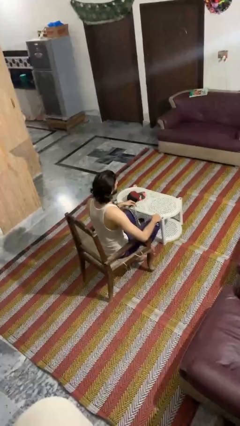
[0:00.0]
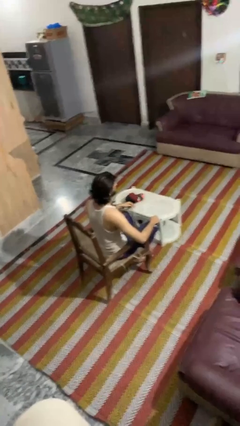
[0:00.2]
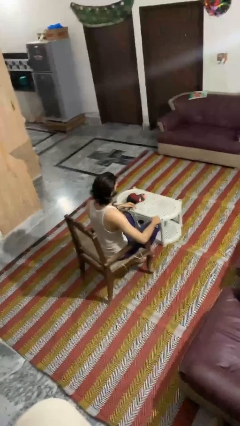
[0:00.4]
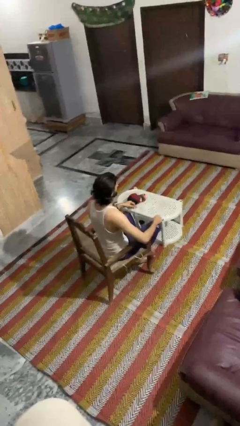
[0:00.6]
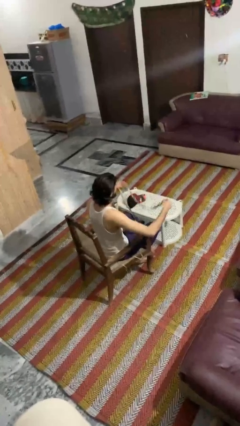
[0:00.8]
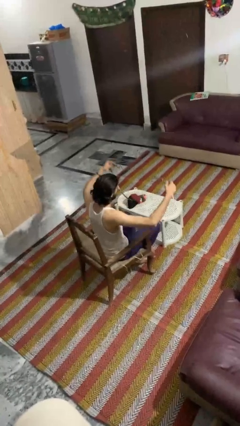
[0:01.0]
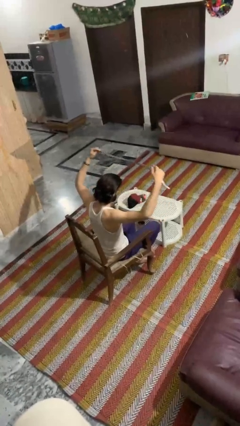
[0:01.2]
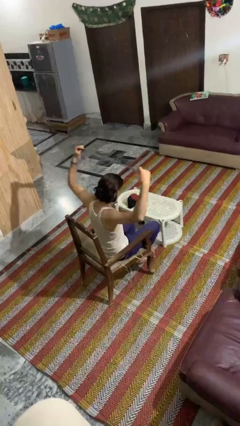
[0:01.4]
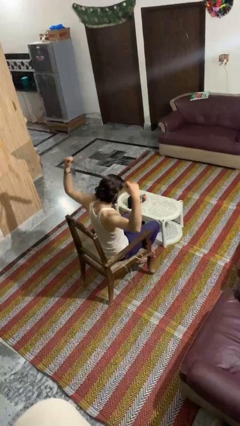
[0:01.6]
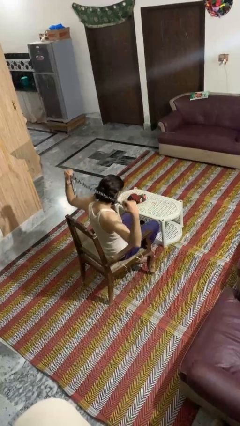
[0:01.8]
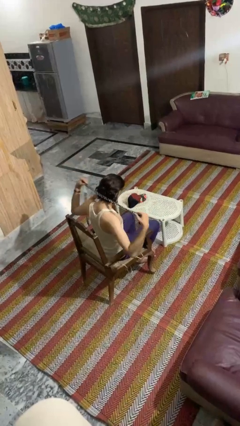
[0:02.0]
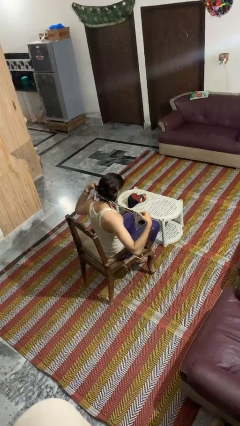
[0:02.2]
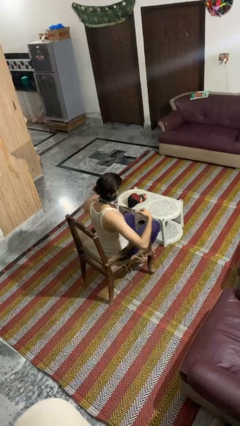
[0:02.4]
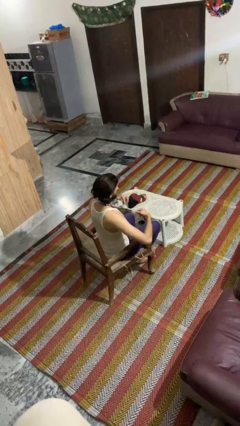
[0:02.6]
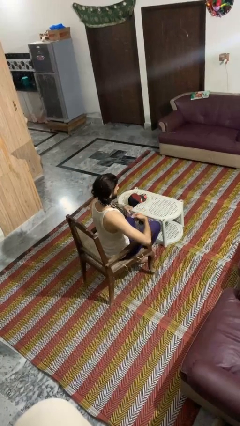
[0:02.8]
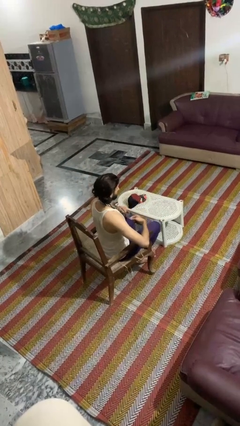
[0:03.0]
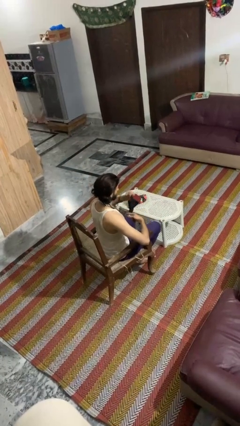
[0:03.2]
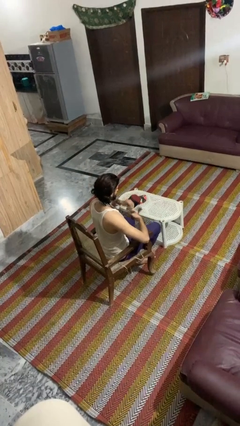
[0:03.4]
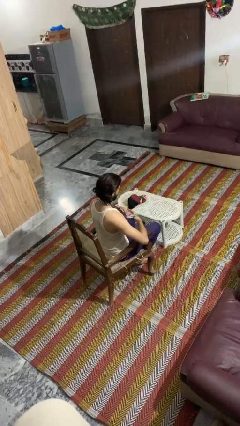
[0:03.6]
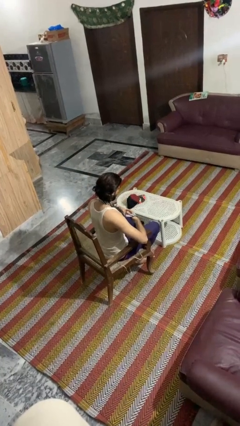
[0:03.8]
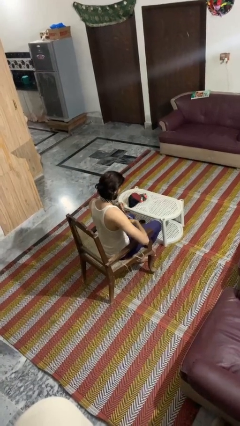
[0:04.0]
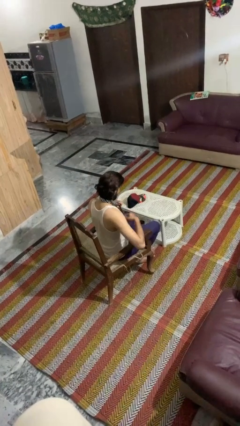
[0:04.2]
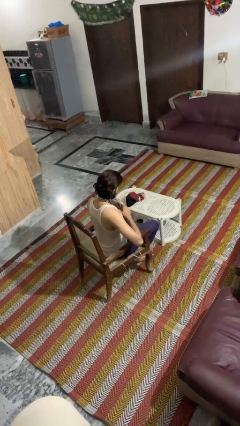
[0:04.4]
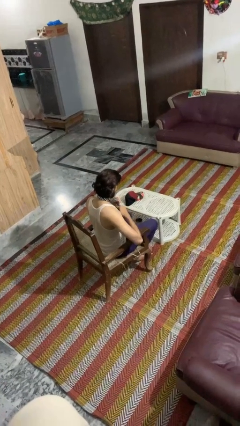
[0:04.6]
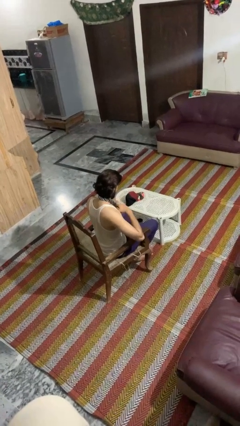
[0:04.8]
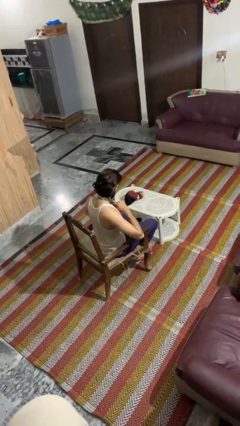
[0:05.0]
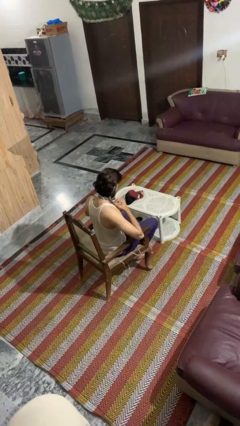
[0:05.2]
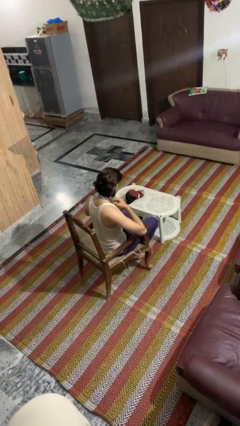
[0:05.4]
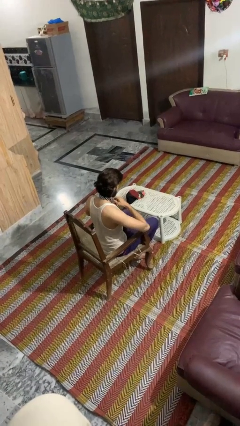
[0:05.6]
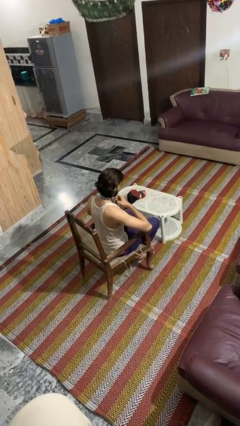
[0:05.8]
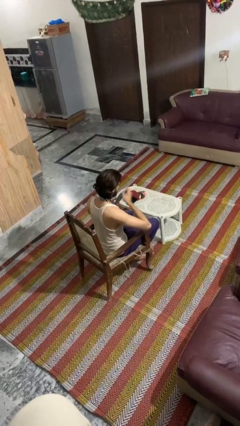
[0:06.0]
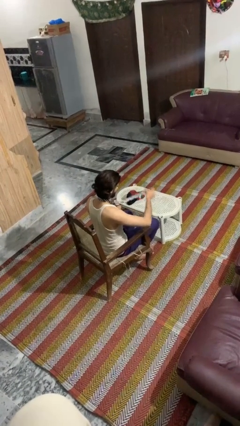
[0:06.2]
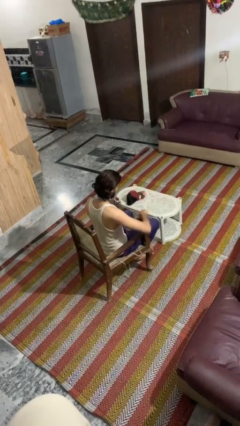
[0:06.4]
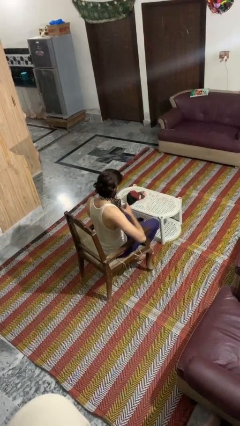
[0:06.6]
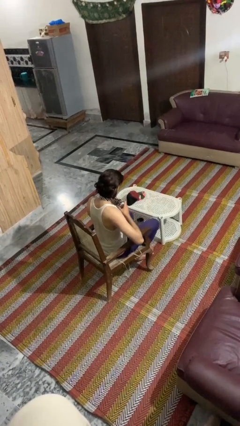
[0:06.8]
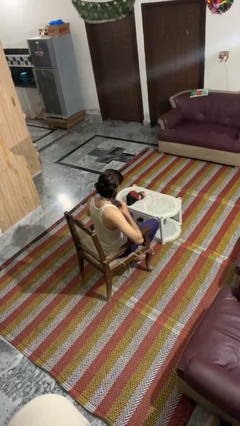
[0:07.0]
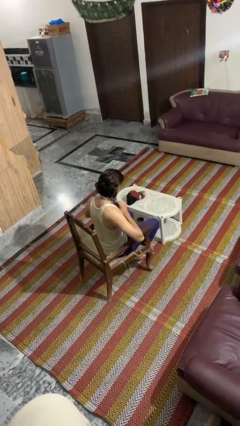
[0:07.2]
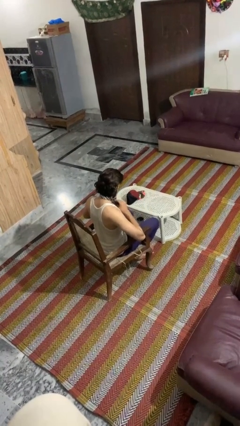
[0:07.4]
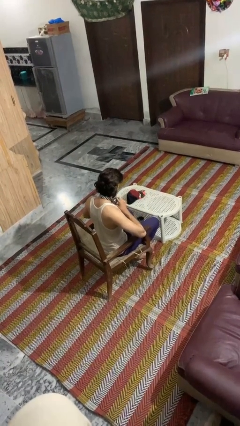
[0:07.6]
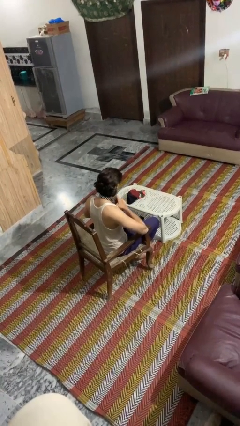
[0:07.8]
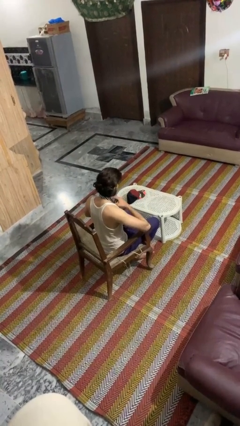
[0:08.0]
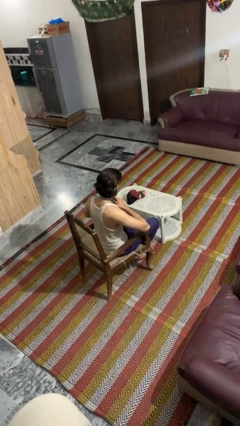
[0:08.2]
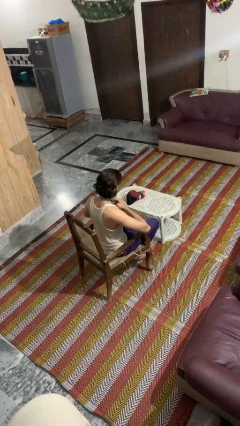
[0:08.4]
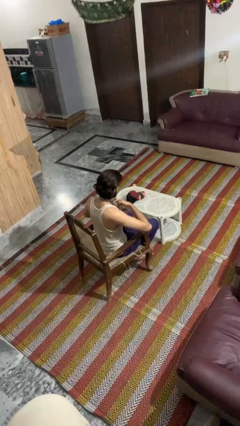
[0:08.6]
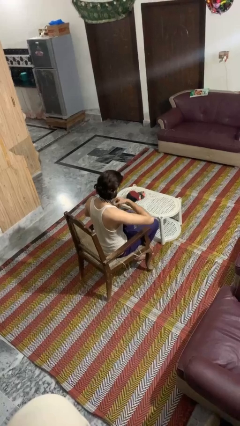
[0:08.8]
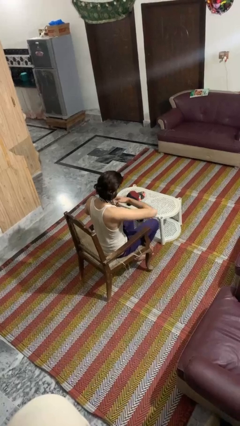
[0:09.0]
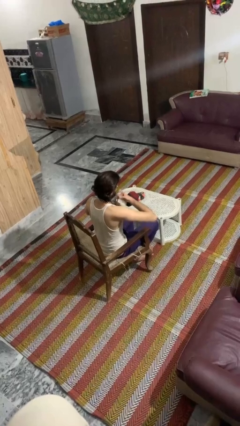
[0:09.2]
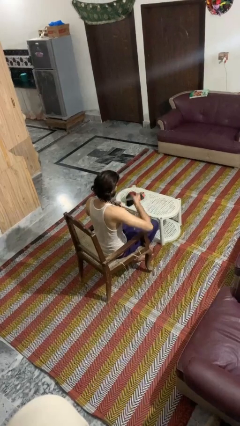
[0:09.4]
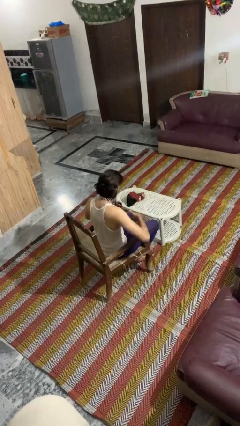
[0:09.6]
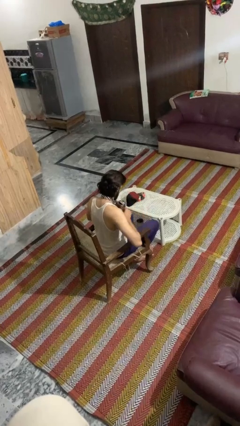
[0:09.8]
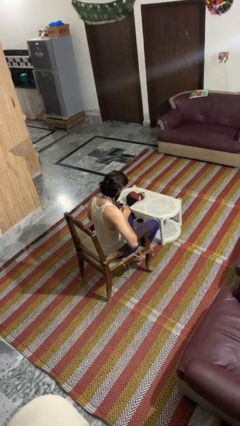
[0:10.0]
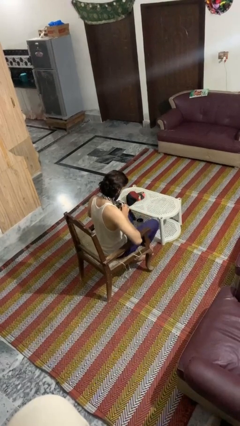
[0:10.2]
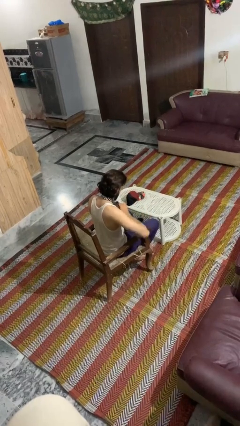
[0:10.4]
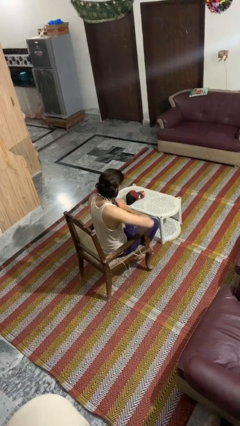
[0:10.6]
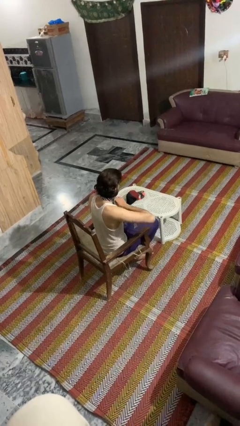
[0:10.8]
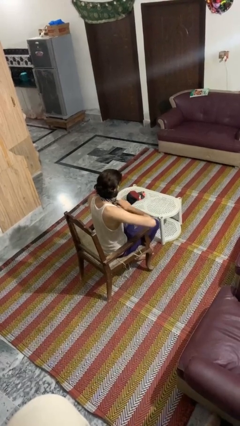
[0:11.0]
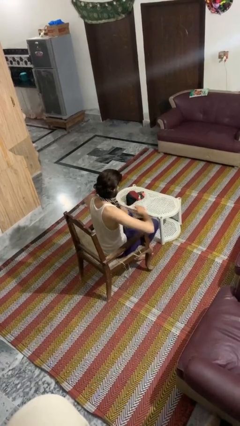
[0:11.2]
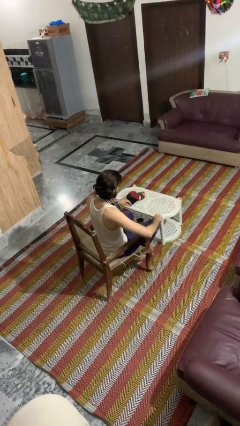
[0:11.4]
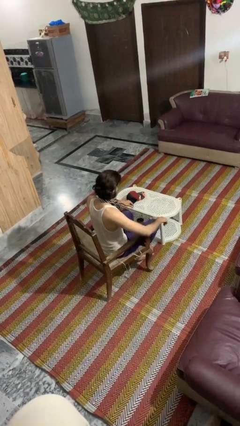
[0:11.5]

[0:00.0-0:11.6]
person puts on necktie

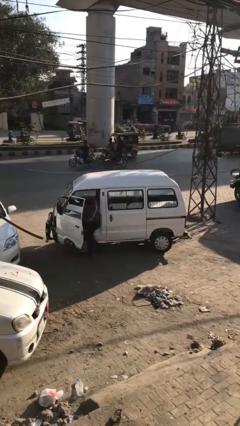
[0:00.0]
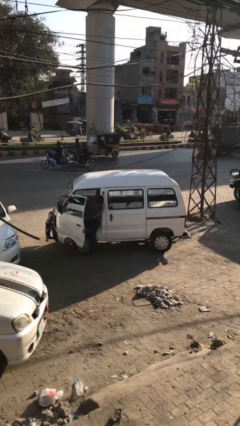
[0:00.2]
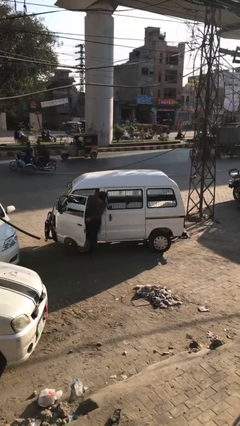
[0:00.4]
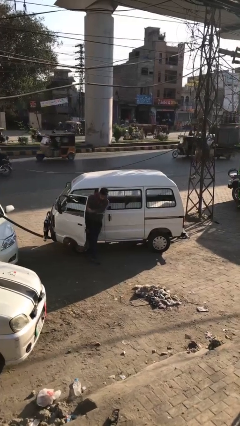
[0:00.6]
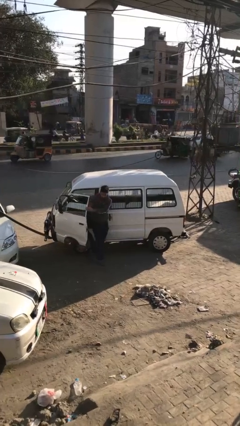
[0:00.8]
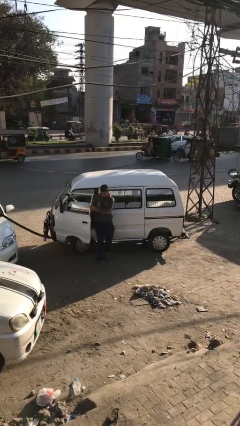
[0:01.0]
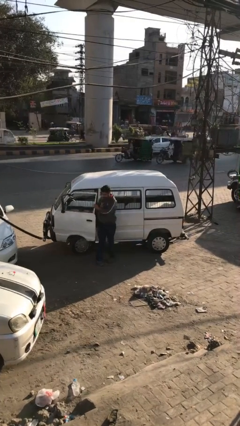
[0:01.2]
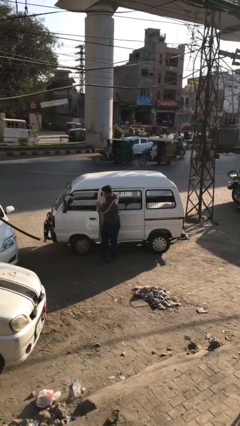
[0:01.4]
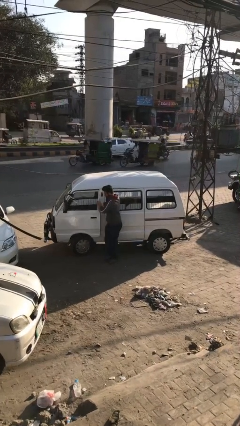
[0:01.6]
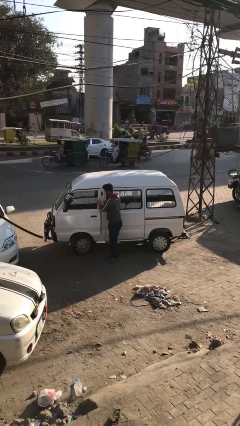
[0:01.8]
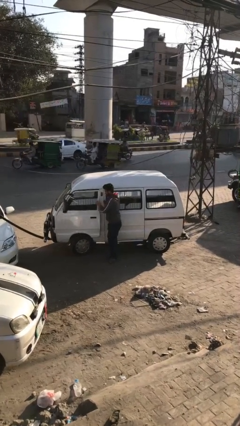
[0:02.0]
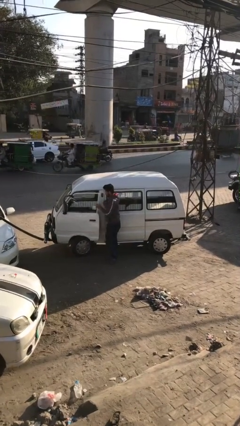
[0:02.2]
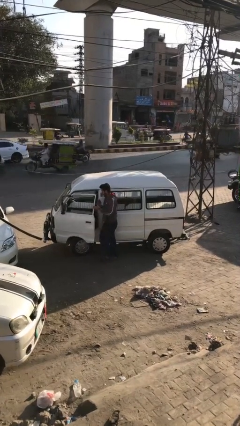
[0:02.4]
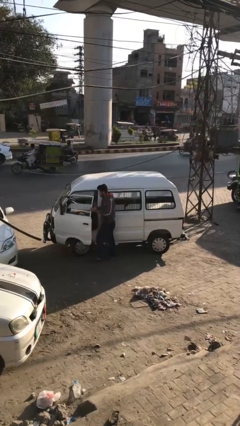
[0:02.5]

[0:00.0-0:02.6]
car drops off person

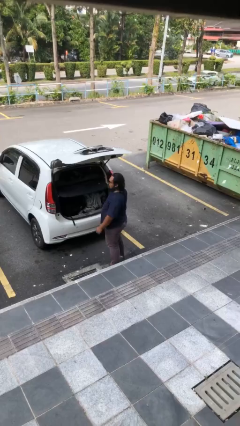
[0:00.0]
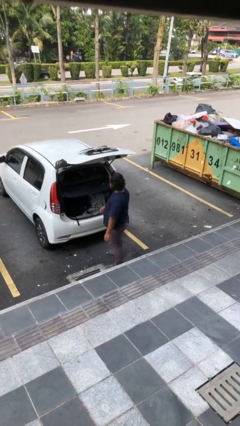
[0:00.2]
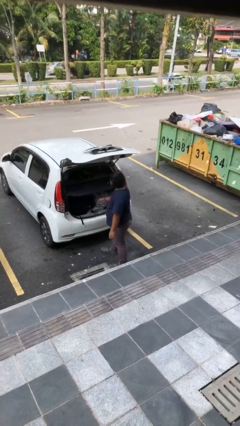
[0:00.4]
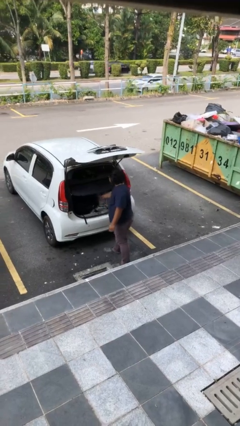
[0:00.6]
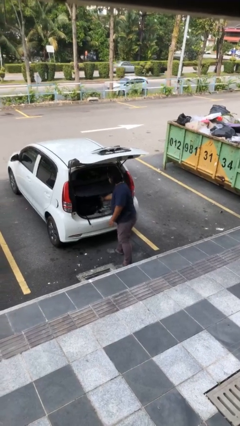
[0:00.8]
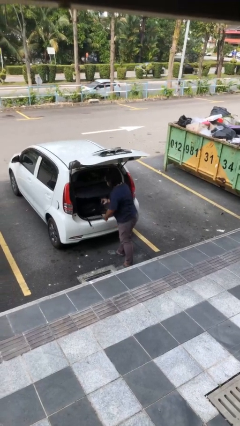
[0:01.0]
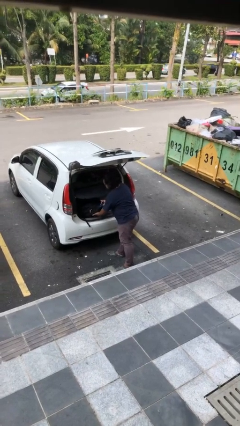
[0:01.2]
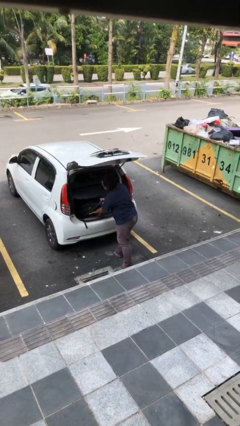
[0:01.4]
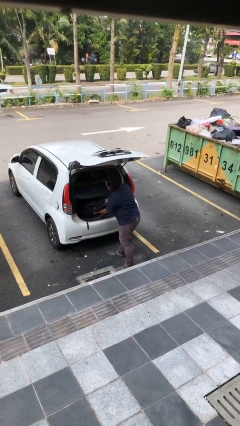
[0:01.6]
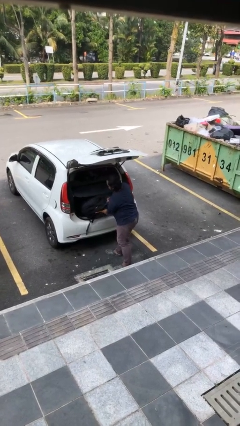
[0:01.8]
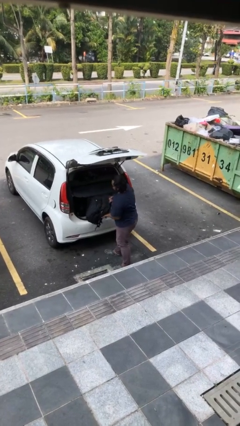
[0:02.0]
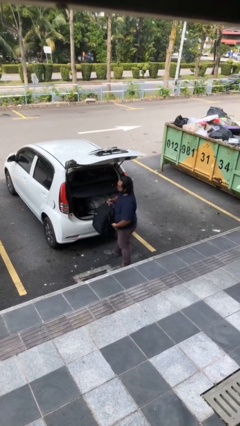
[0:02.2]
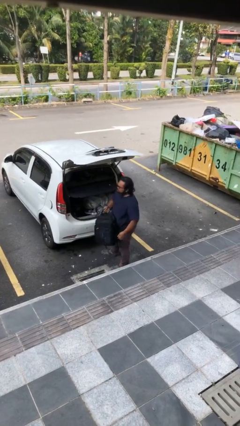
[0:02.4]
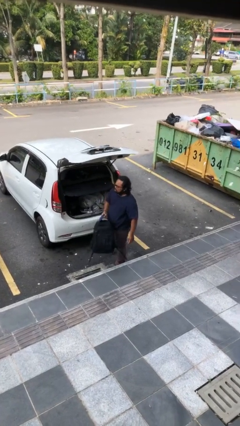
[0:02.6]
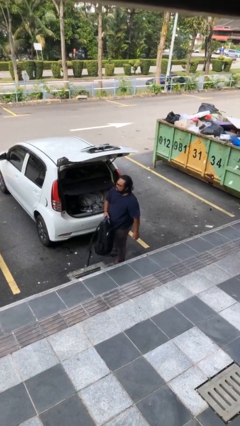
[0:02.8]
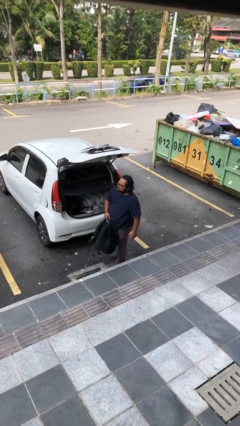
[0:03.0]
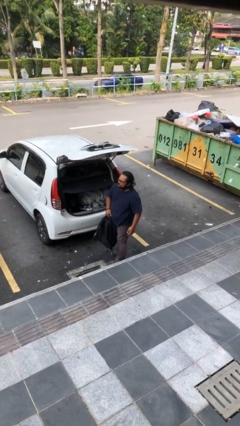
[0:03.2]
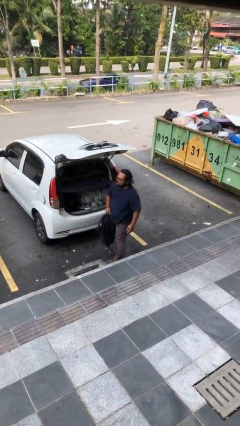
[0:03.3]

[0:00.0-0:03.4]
person unloads car

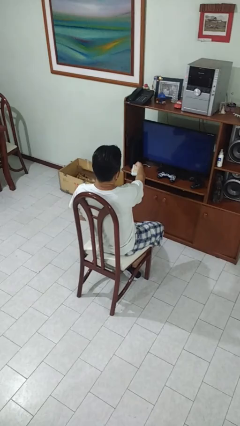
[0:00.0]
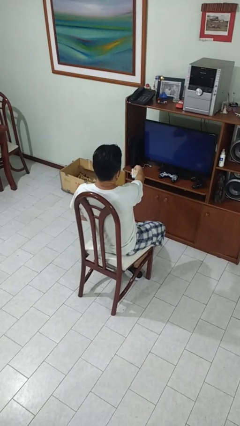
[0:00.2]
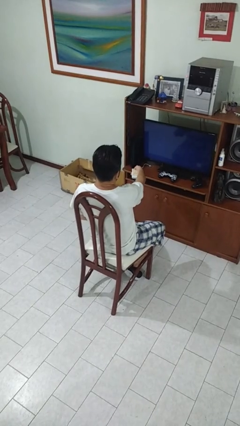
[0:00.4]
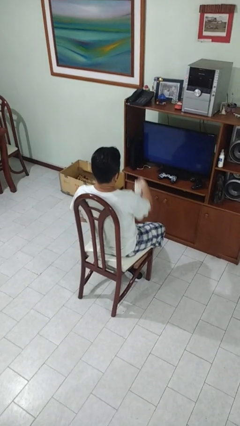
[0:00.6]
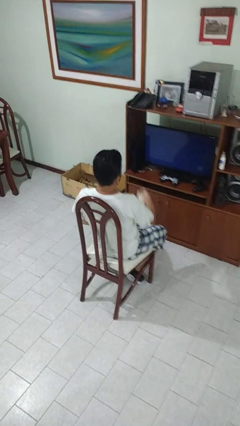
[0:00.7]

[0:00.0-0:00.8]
person uses television remote
